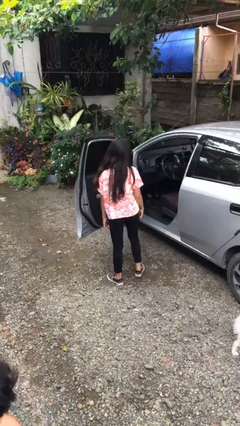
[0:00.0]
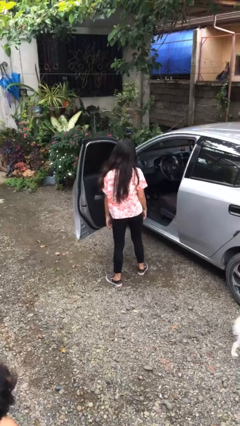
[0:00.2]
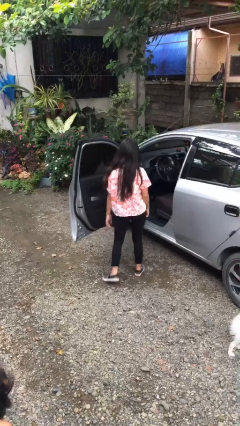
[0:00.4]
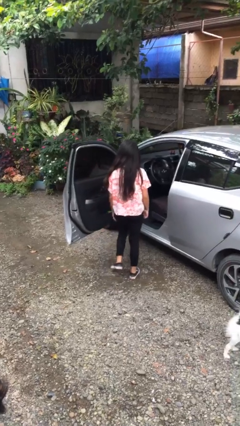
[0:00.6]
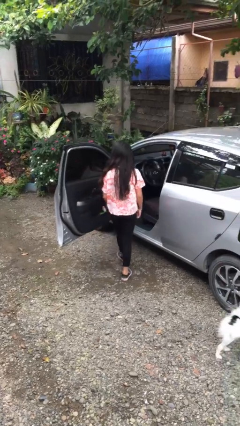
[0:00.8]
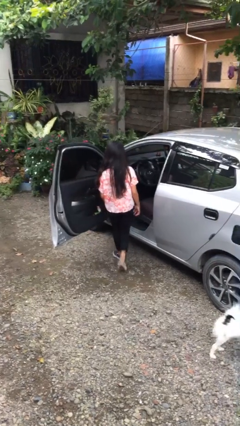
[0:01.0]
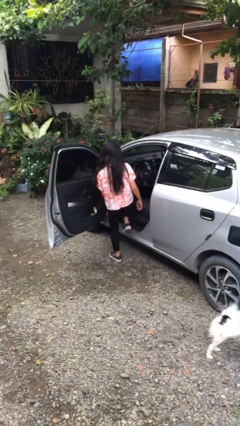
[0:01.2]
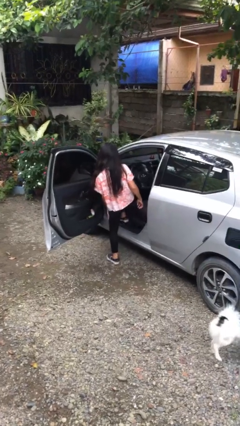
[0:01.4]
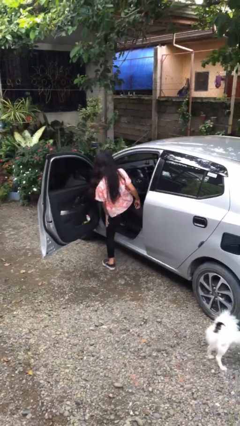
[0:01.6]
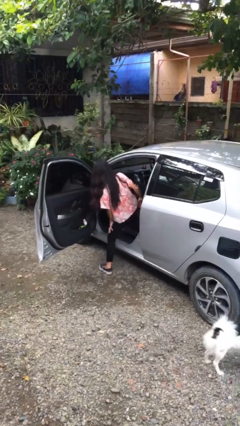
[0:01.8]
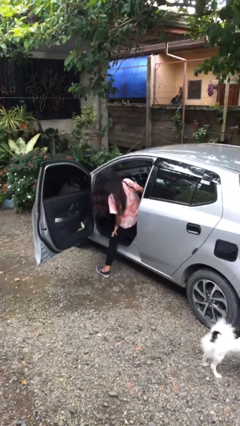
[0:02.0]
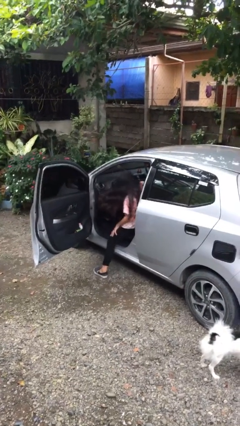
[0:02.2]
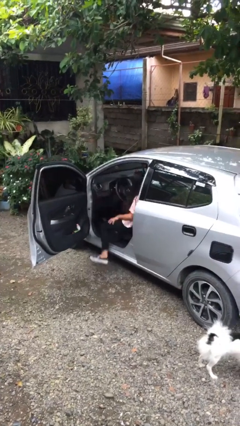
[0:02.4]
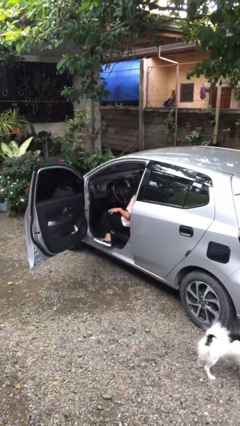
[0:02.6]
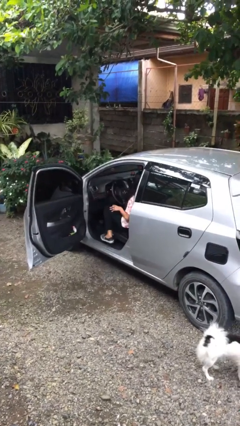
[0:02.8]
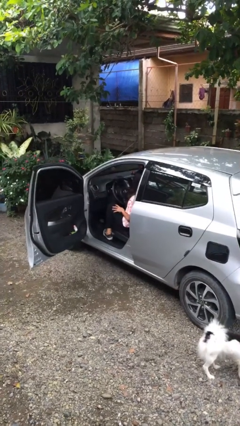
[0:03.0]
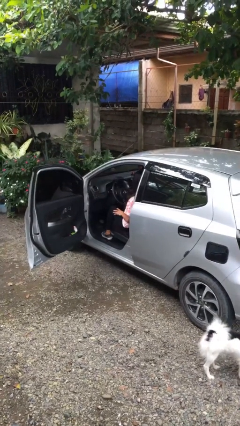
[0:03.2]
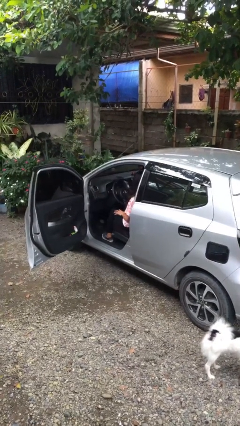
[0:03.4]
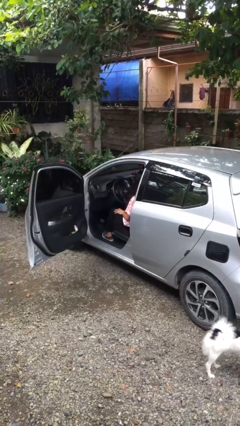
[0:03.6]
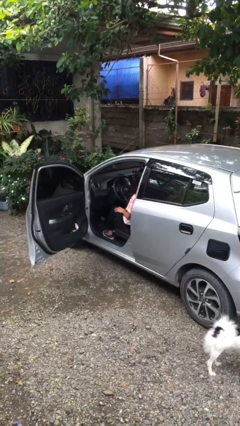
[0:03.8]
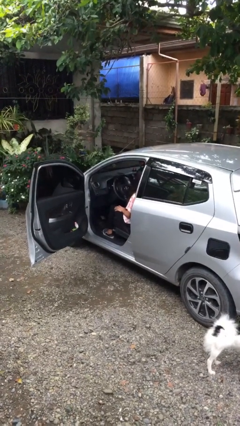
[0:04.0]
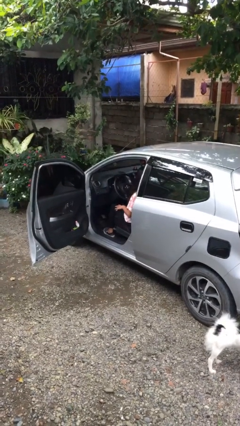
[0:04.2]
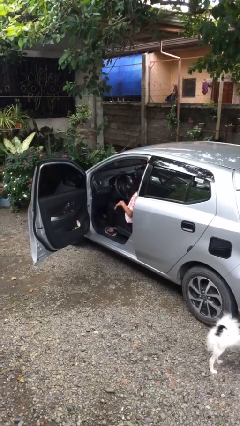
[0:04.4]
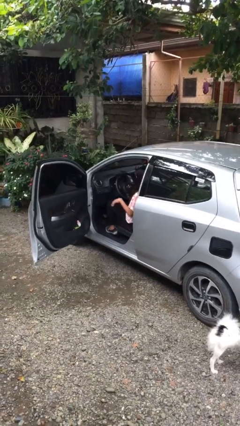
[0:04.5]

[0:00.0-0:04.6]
person enters car

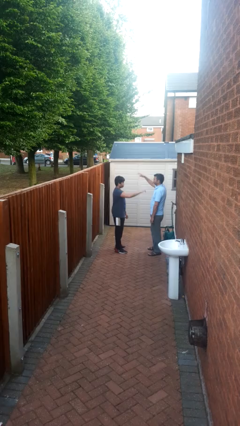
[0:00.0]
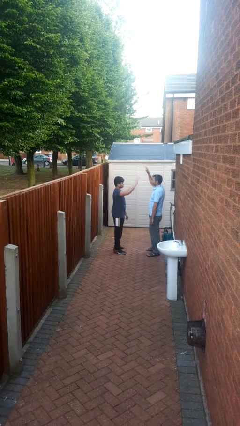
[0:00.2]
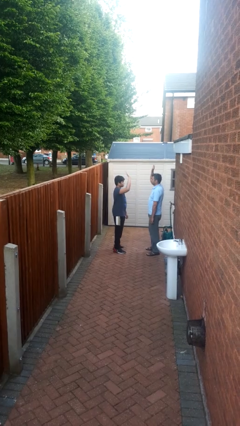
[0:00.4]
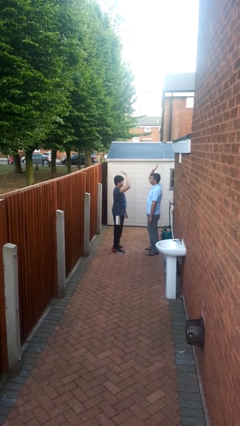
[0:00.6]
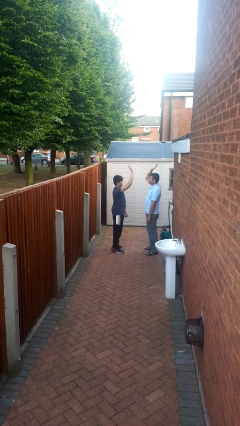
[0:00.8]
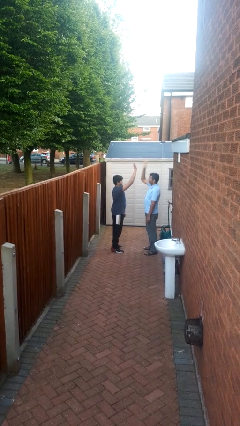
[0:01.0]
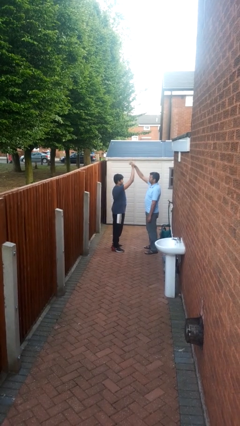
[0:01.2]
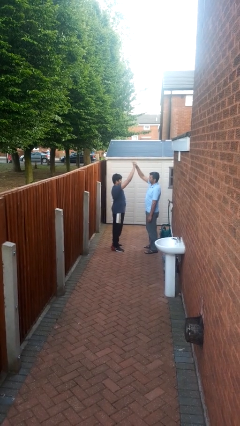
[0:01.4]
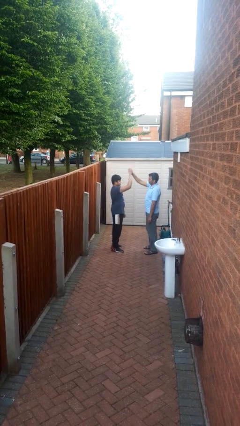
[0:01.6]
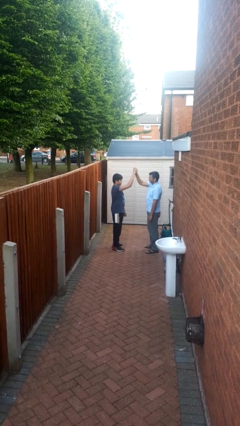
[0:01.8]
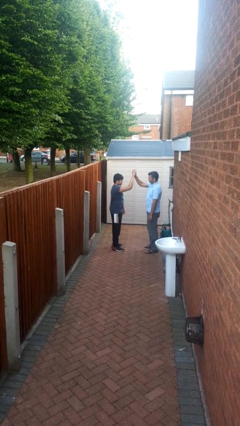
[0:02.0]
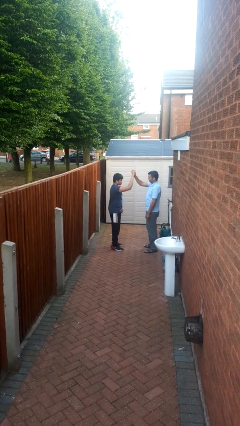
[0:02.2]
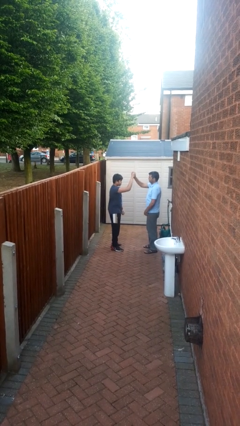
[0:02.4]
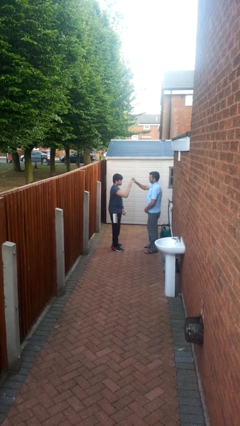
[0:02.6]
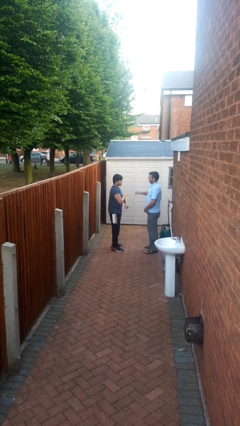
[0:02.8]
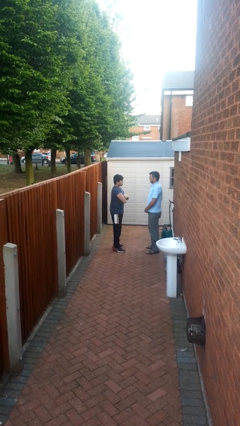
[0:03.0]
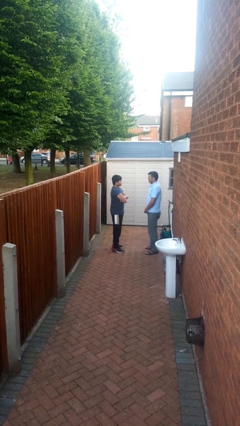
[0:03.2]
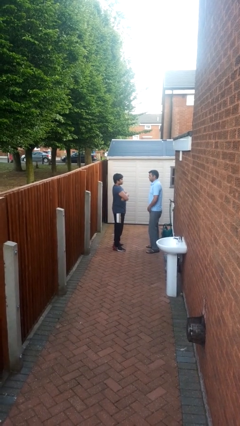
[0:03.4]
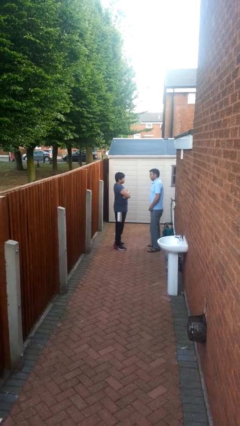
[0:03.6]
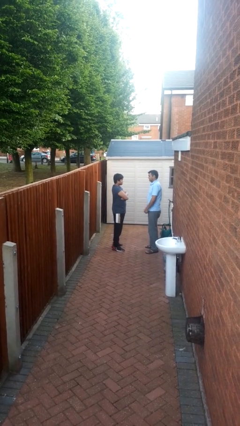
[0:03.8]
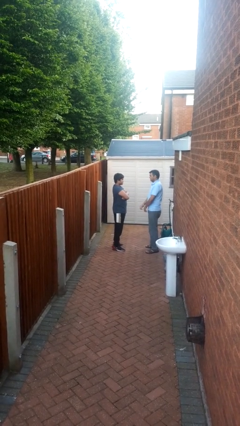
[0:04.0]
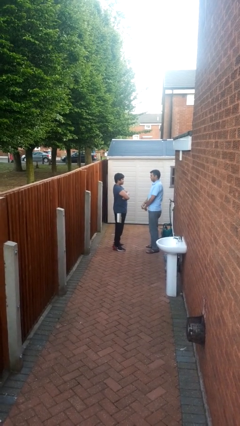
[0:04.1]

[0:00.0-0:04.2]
person highfives hand

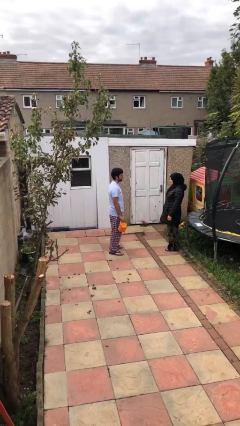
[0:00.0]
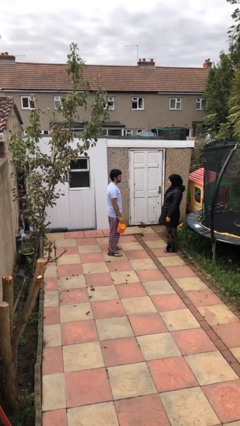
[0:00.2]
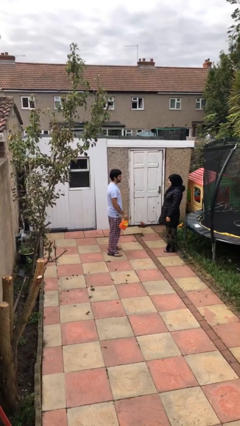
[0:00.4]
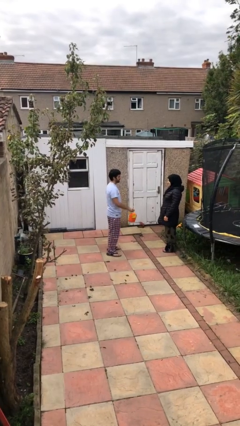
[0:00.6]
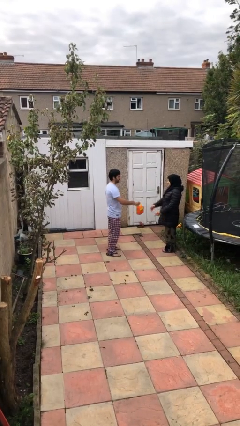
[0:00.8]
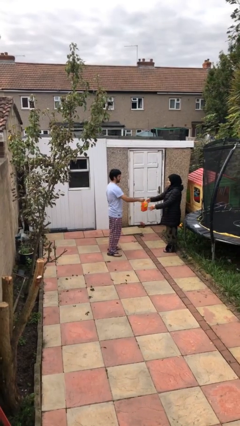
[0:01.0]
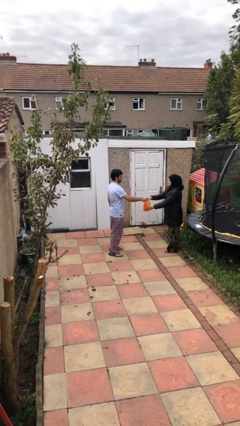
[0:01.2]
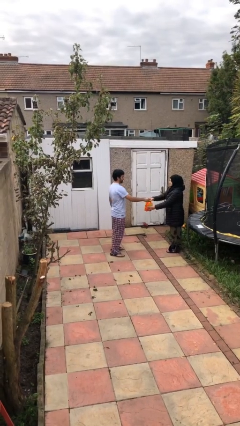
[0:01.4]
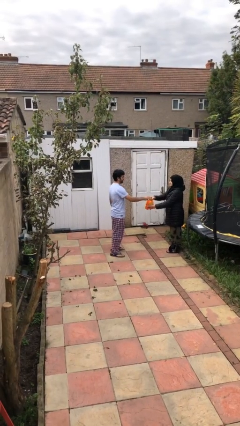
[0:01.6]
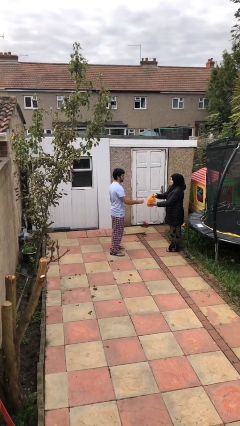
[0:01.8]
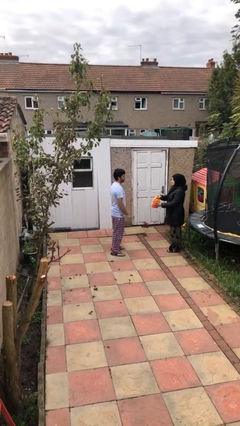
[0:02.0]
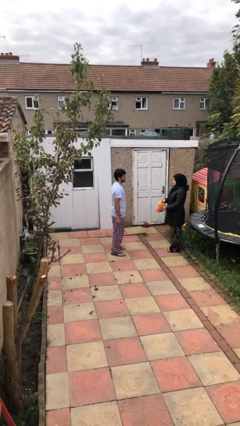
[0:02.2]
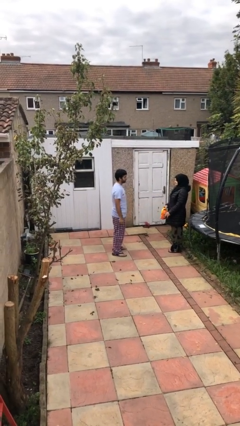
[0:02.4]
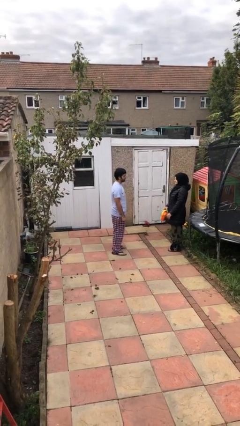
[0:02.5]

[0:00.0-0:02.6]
person transfers object to person

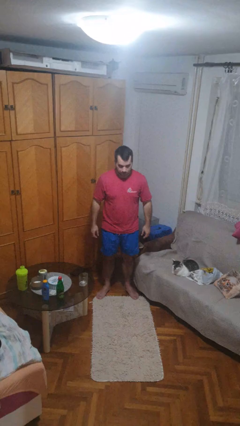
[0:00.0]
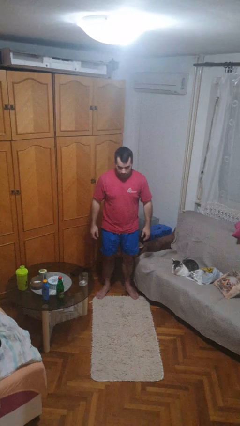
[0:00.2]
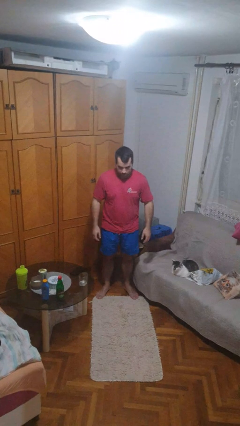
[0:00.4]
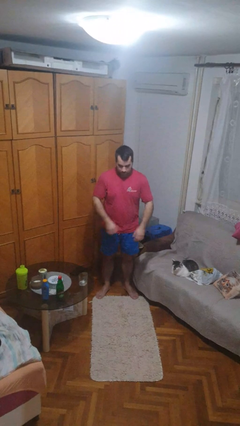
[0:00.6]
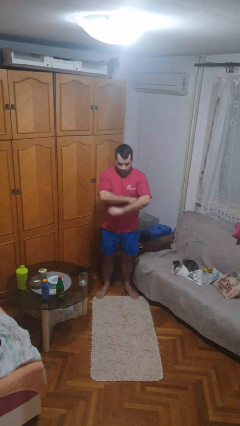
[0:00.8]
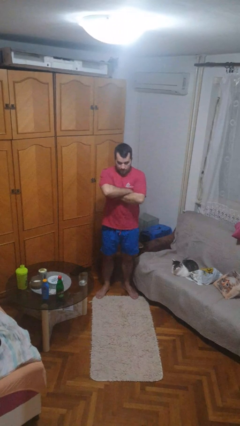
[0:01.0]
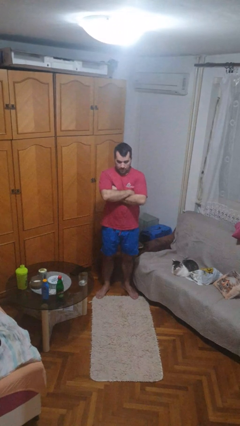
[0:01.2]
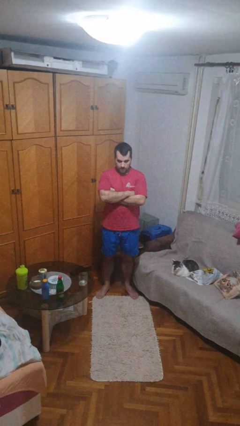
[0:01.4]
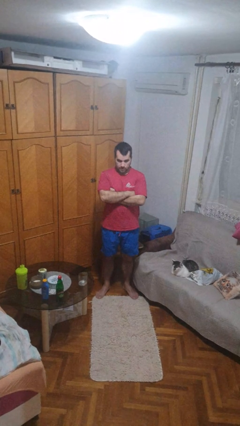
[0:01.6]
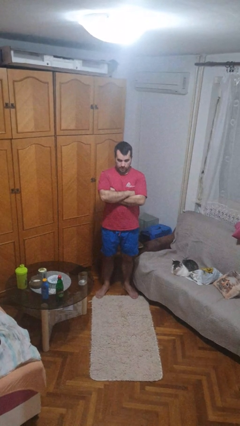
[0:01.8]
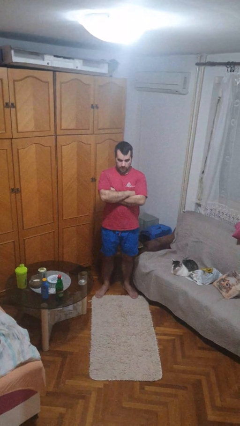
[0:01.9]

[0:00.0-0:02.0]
person crosses arms

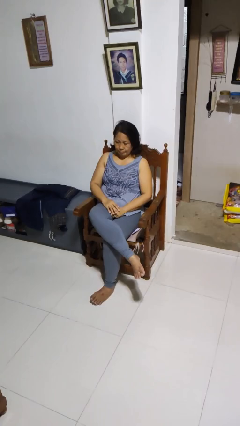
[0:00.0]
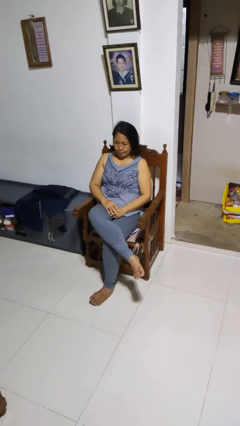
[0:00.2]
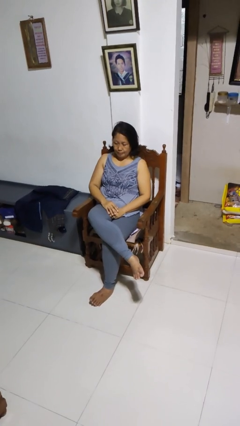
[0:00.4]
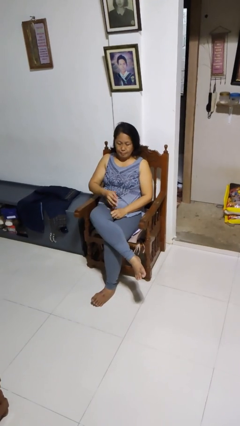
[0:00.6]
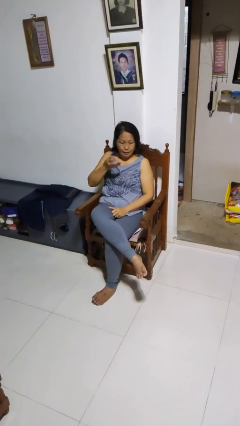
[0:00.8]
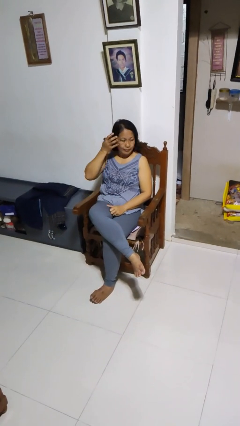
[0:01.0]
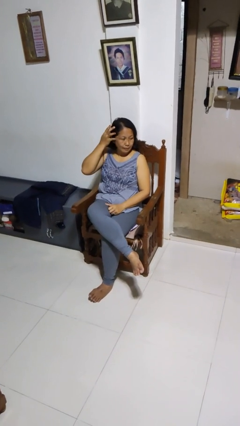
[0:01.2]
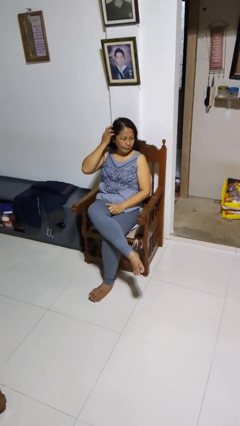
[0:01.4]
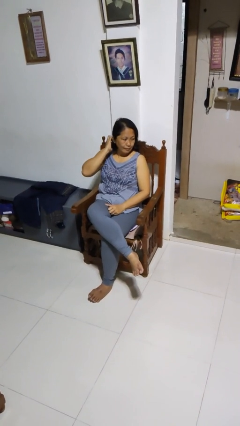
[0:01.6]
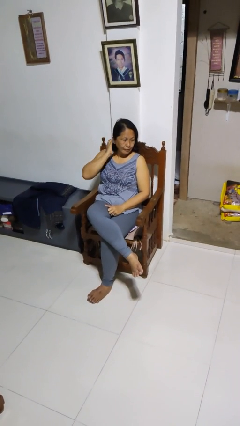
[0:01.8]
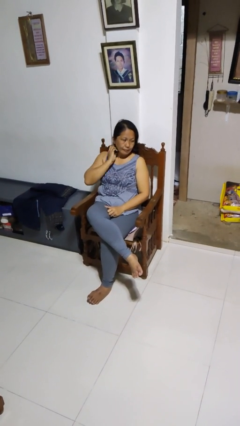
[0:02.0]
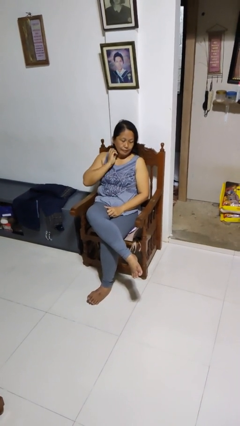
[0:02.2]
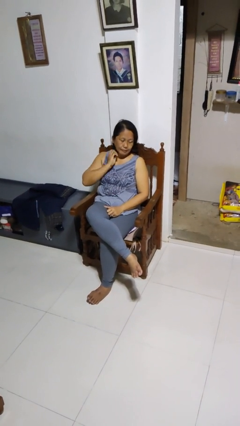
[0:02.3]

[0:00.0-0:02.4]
person strokes hair

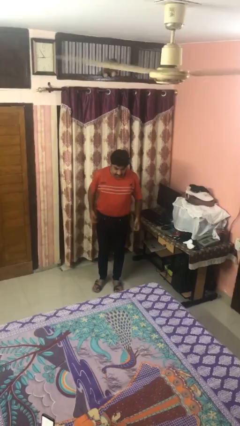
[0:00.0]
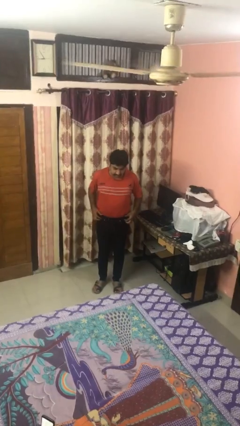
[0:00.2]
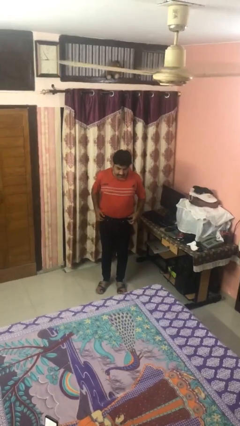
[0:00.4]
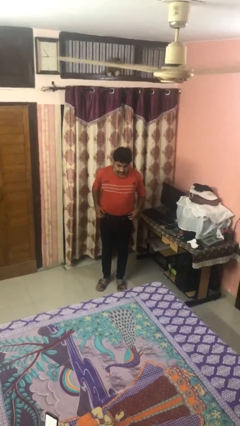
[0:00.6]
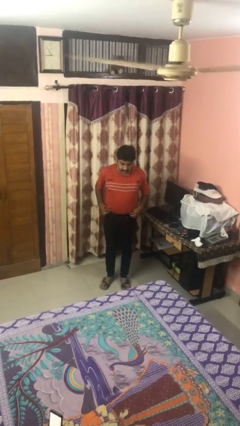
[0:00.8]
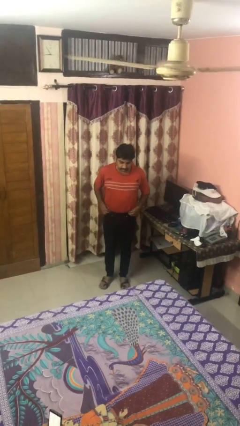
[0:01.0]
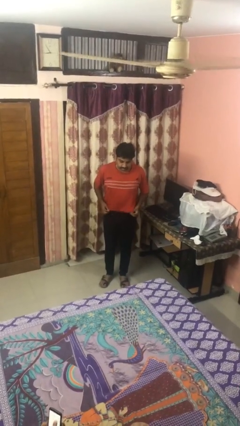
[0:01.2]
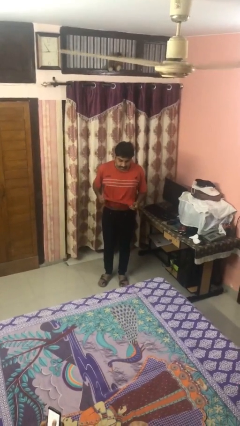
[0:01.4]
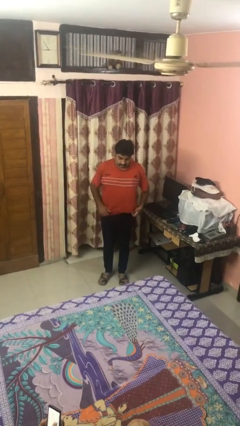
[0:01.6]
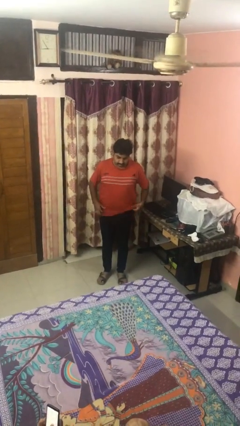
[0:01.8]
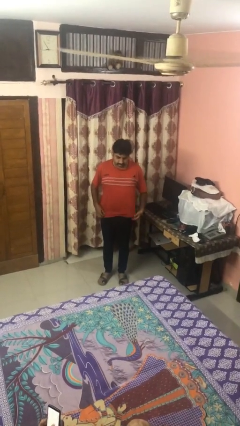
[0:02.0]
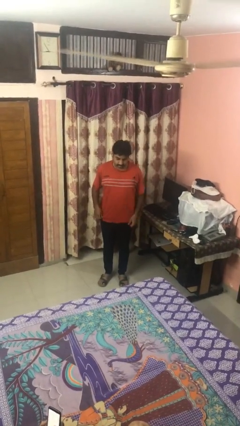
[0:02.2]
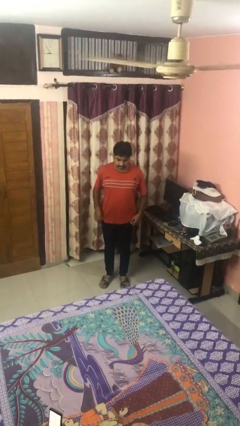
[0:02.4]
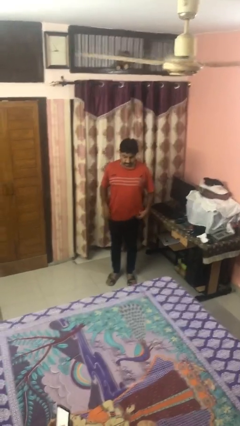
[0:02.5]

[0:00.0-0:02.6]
person untucks shirt
